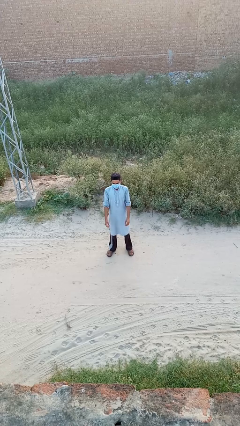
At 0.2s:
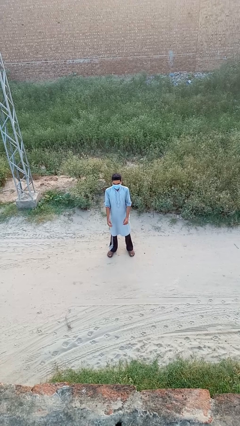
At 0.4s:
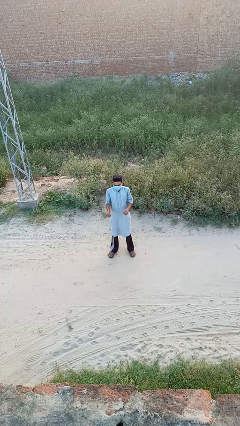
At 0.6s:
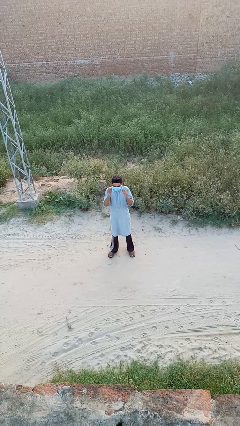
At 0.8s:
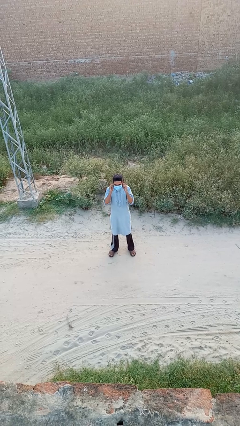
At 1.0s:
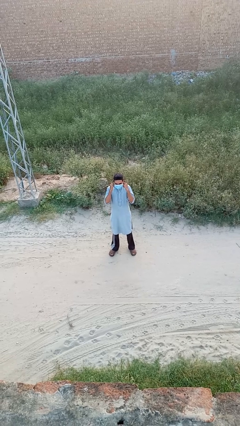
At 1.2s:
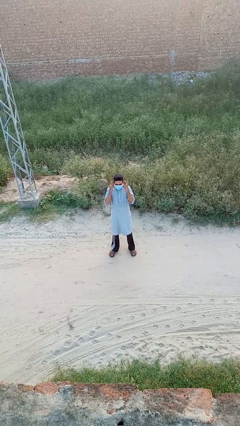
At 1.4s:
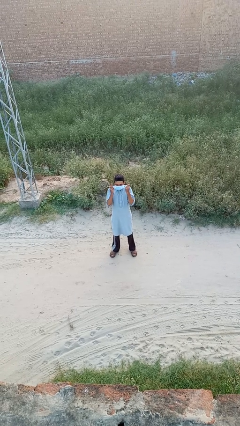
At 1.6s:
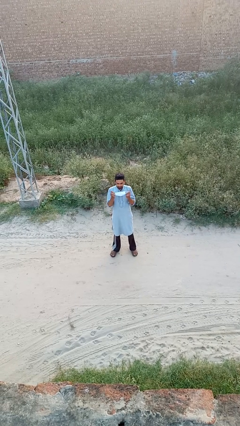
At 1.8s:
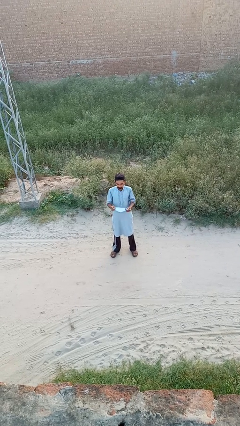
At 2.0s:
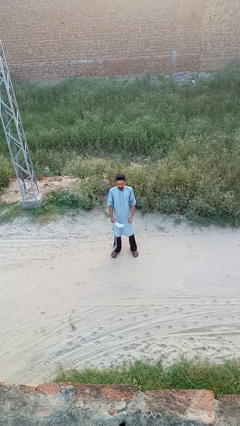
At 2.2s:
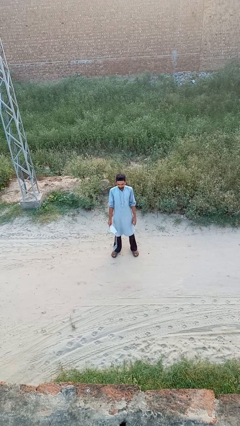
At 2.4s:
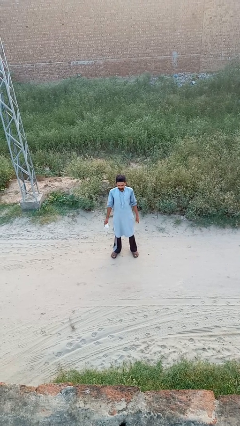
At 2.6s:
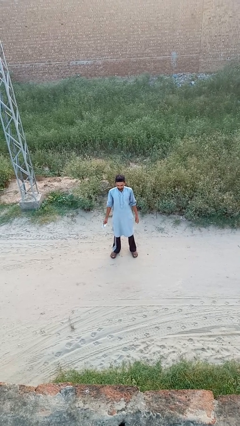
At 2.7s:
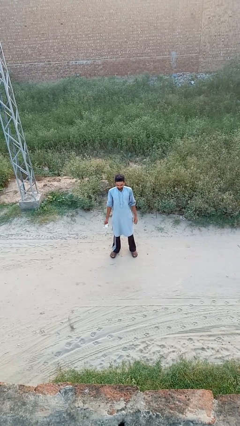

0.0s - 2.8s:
person takes off facemask

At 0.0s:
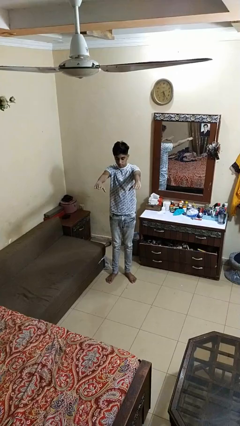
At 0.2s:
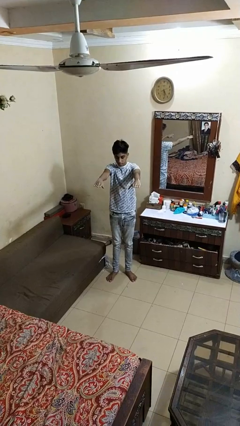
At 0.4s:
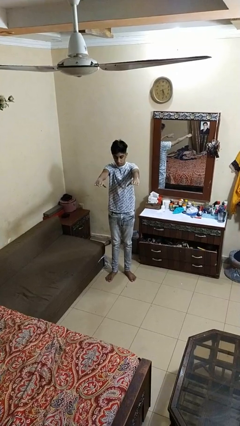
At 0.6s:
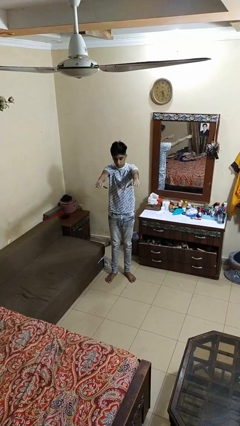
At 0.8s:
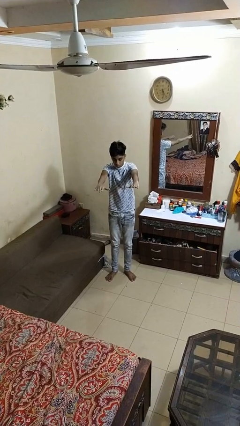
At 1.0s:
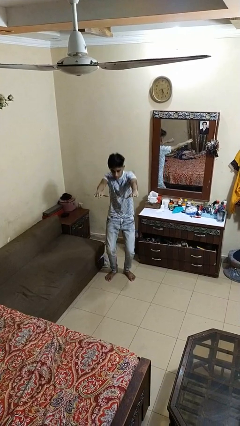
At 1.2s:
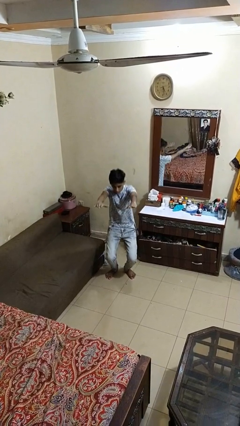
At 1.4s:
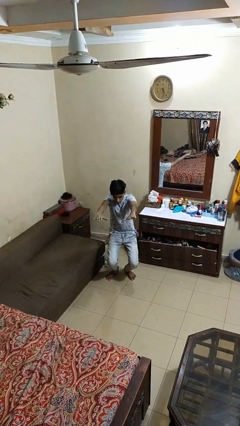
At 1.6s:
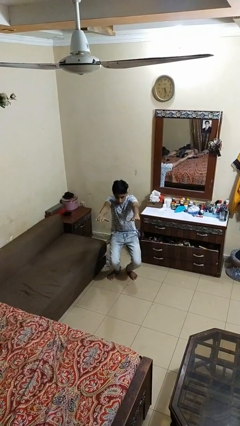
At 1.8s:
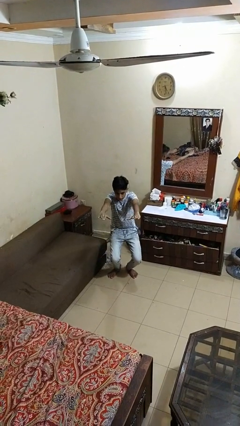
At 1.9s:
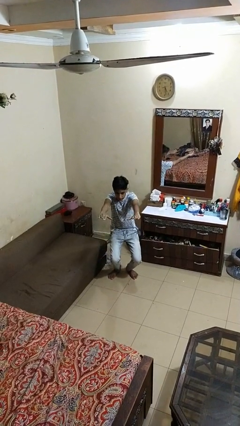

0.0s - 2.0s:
person squats

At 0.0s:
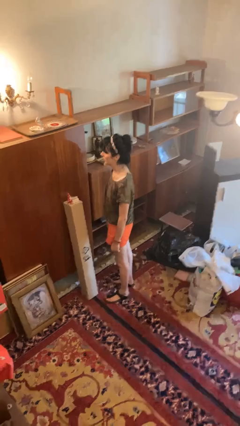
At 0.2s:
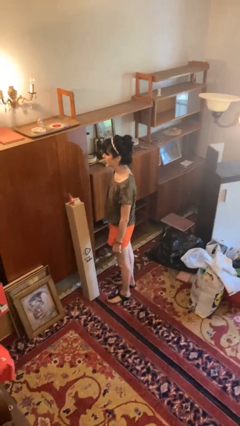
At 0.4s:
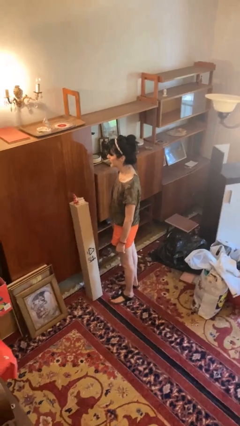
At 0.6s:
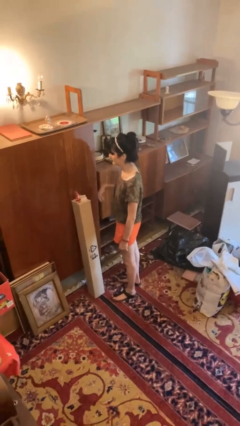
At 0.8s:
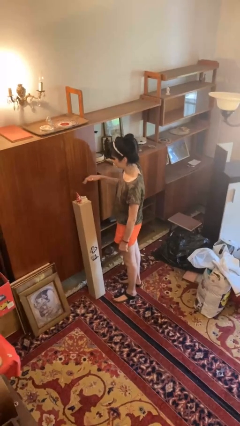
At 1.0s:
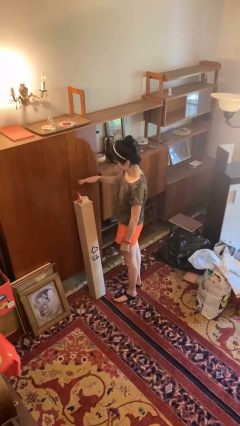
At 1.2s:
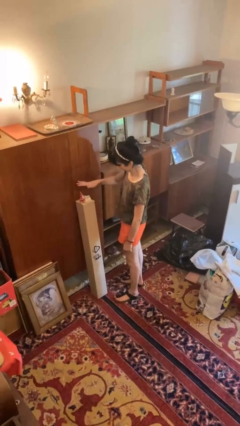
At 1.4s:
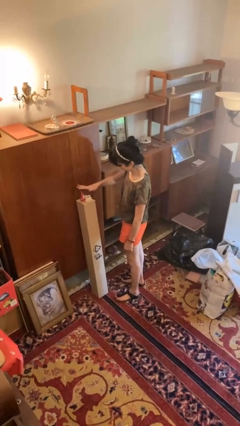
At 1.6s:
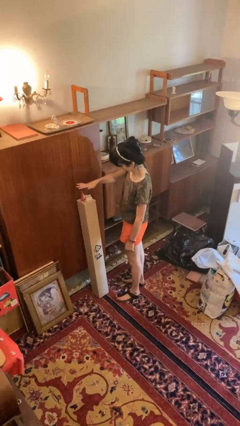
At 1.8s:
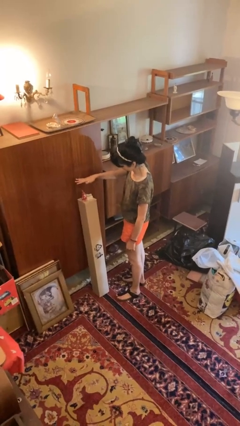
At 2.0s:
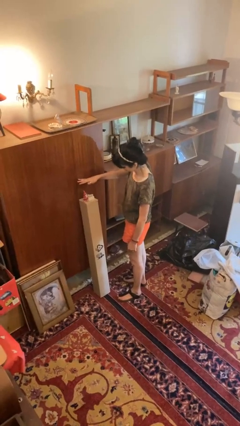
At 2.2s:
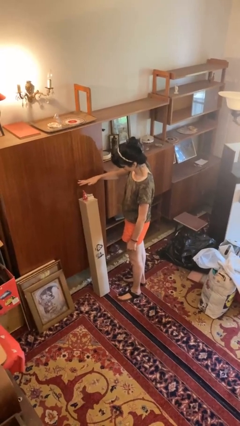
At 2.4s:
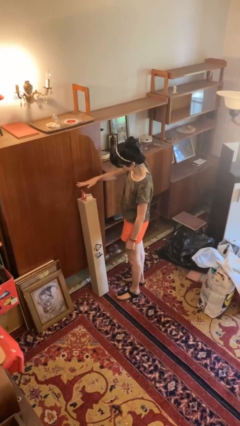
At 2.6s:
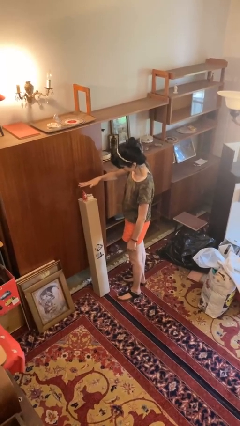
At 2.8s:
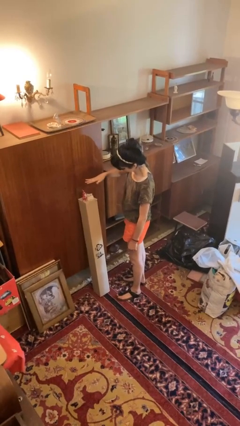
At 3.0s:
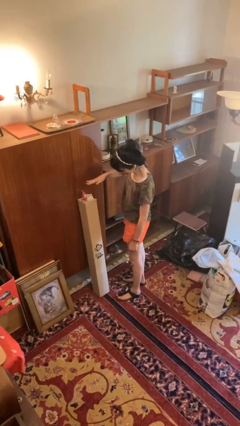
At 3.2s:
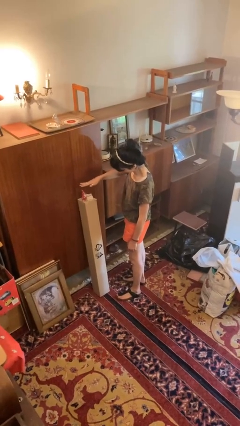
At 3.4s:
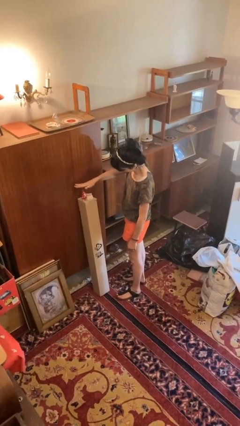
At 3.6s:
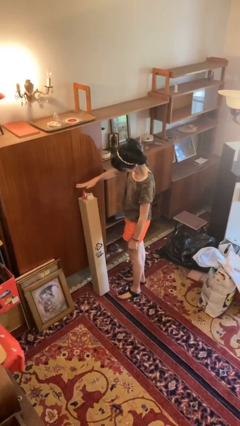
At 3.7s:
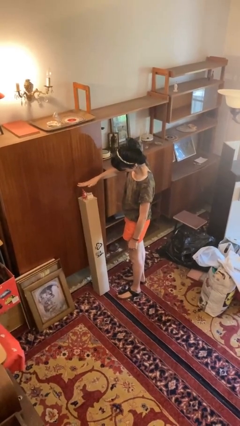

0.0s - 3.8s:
person waves hand over object

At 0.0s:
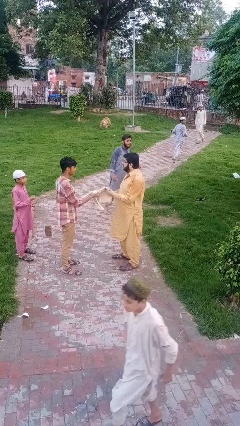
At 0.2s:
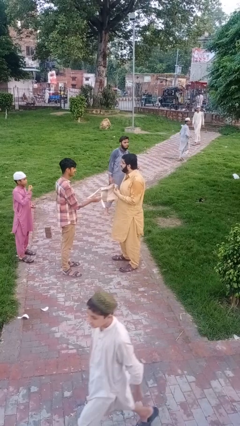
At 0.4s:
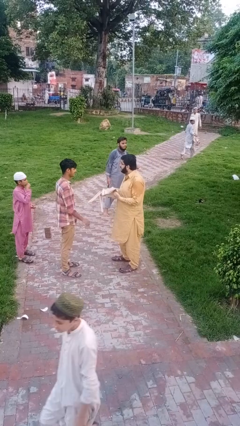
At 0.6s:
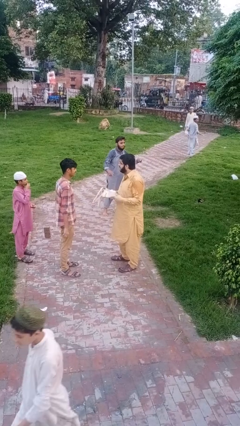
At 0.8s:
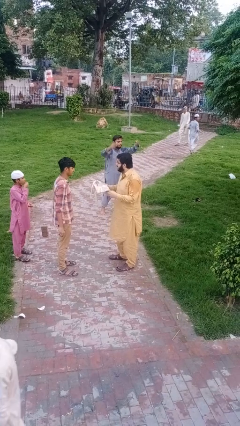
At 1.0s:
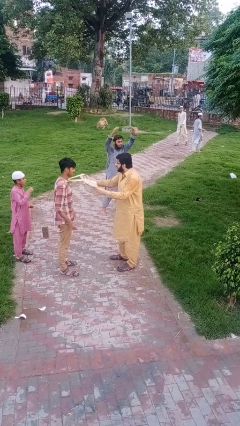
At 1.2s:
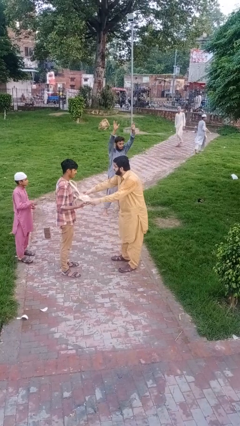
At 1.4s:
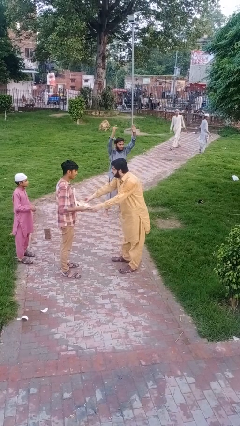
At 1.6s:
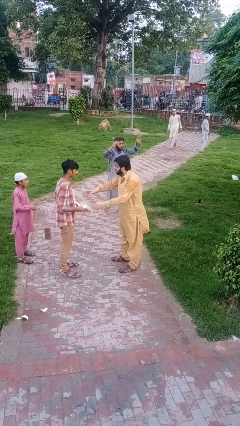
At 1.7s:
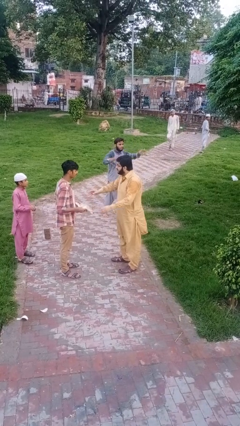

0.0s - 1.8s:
person transfers object to person

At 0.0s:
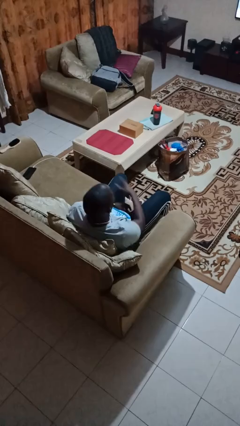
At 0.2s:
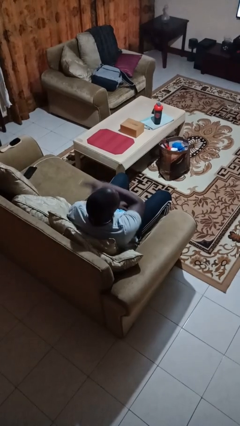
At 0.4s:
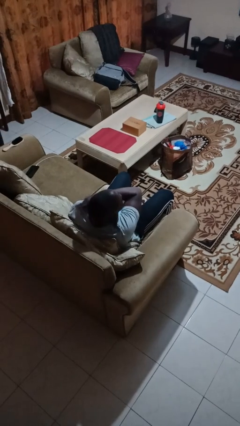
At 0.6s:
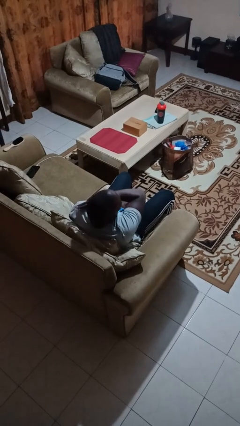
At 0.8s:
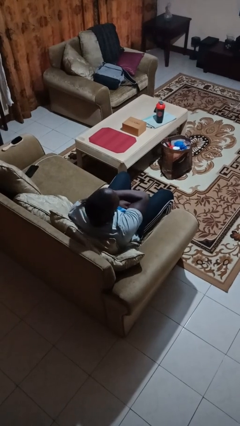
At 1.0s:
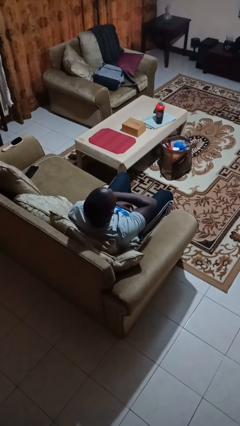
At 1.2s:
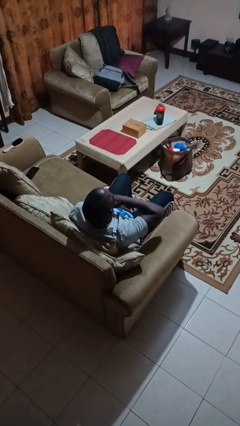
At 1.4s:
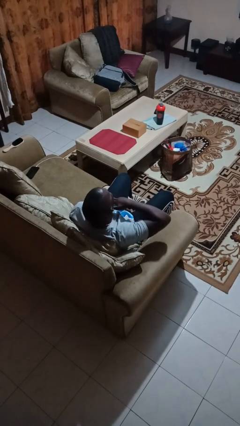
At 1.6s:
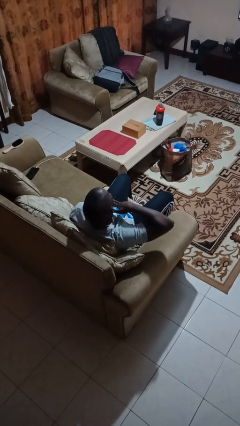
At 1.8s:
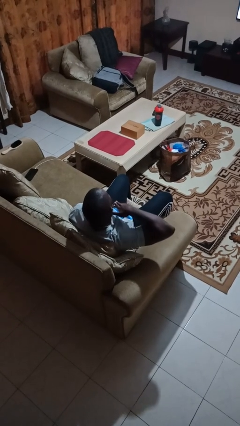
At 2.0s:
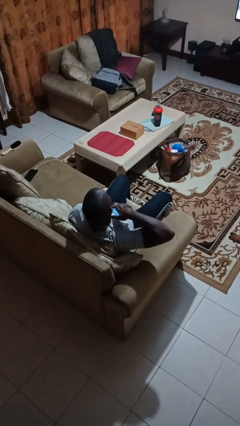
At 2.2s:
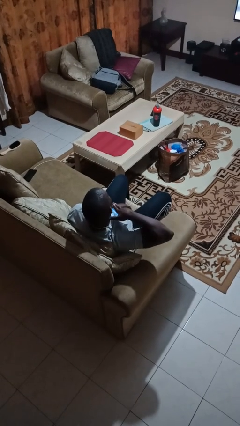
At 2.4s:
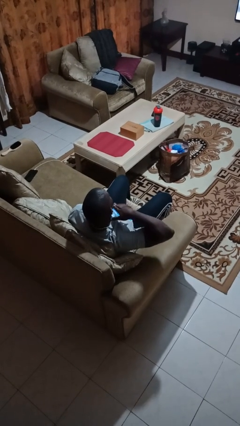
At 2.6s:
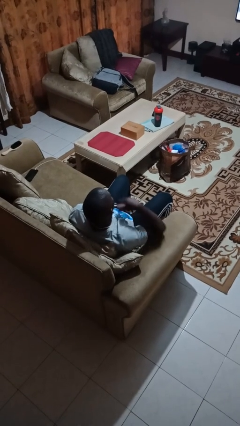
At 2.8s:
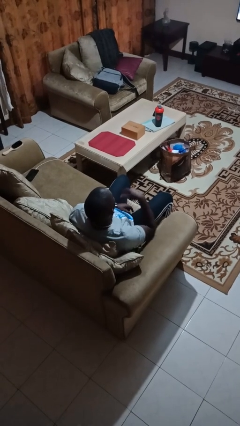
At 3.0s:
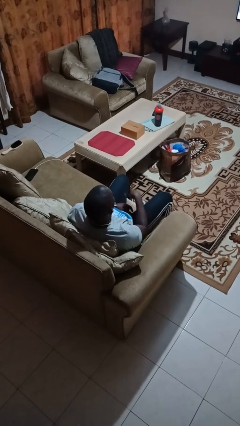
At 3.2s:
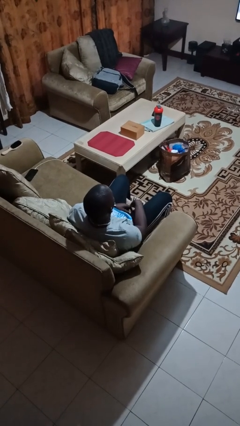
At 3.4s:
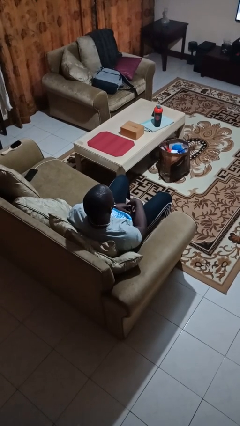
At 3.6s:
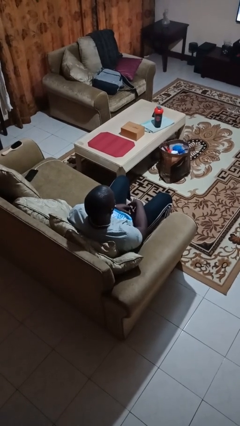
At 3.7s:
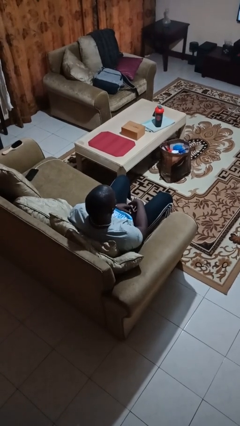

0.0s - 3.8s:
person gestures cut

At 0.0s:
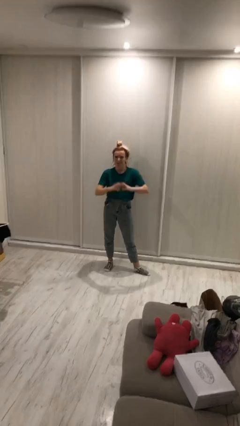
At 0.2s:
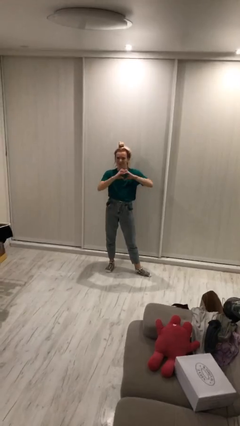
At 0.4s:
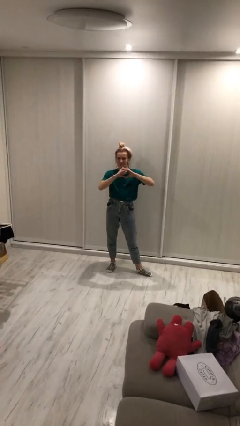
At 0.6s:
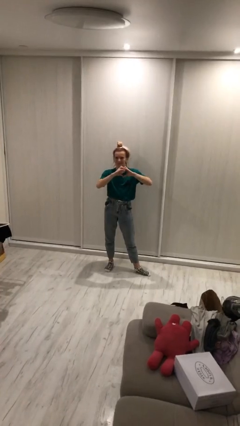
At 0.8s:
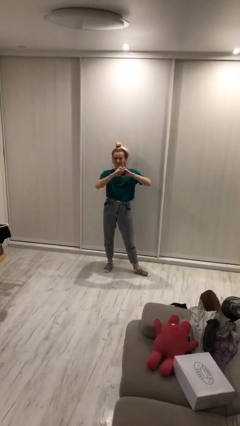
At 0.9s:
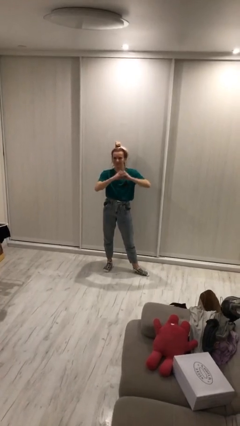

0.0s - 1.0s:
person gestures heart

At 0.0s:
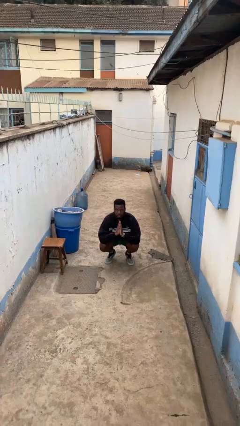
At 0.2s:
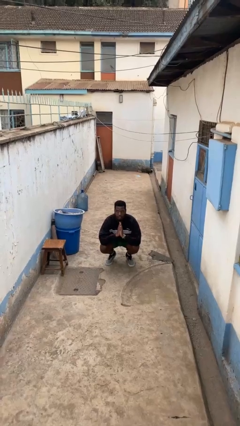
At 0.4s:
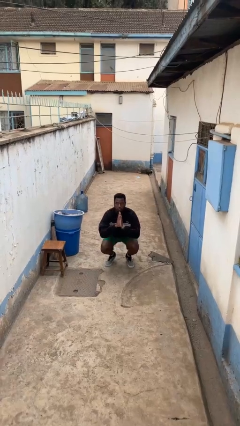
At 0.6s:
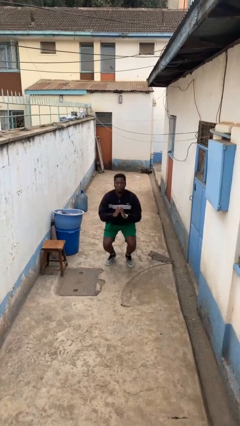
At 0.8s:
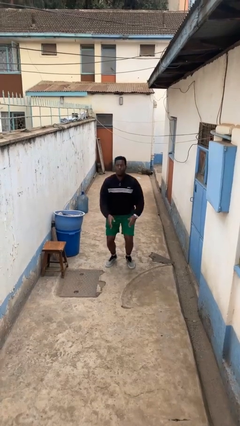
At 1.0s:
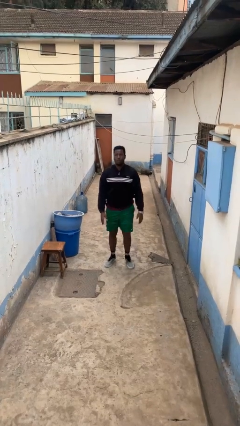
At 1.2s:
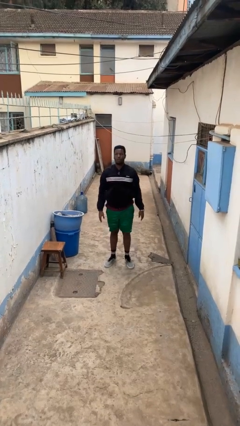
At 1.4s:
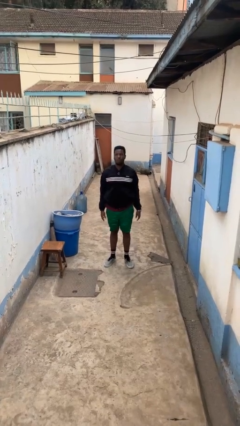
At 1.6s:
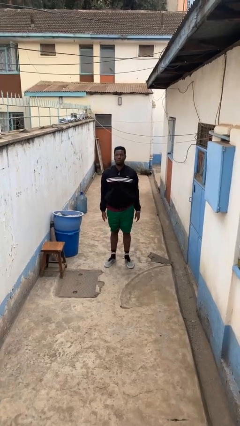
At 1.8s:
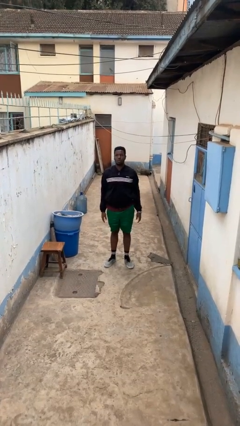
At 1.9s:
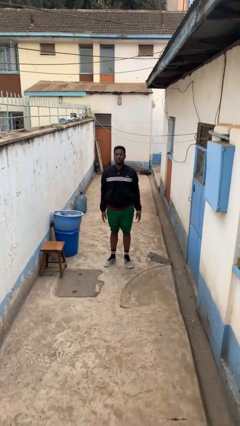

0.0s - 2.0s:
person stands up

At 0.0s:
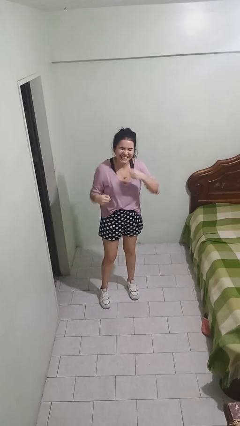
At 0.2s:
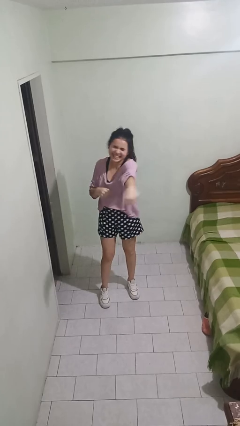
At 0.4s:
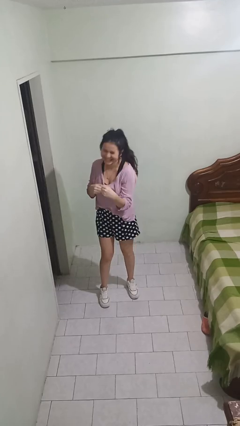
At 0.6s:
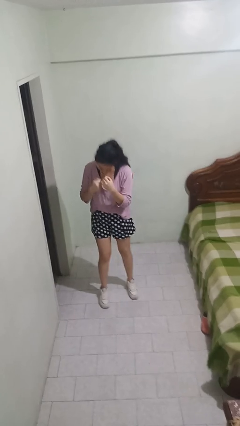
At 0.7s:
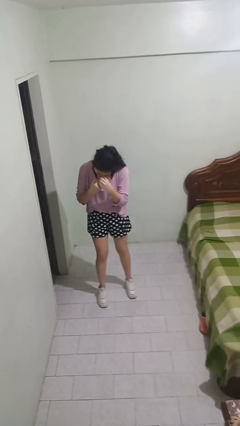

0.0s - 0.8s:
person karate chop
